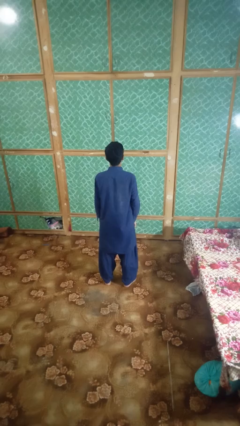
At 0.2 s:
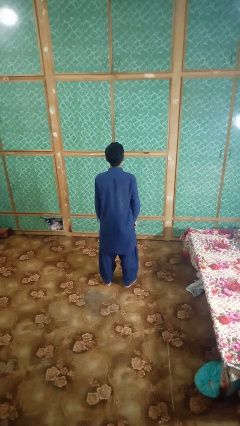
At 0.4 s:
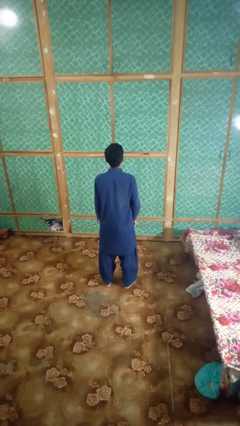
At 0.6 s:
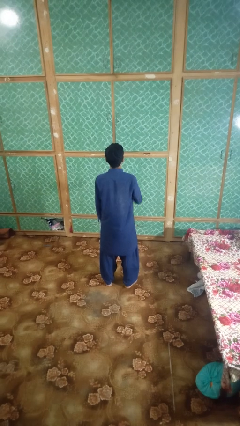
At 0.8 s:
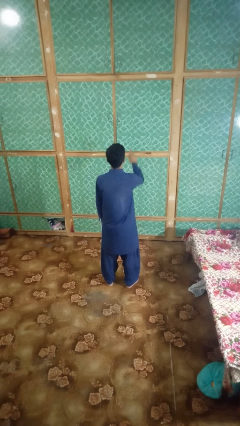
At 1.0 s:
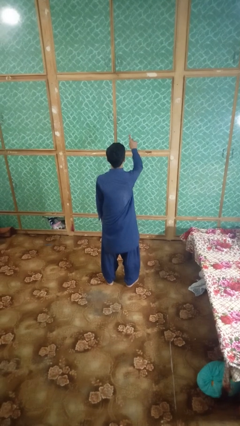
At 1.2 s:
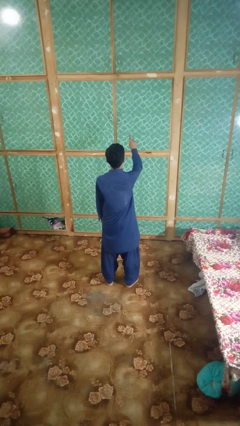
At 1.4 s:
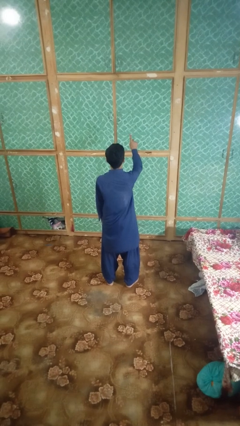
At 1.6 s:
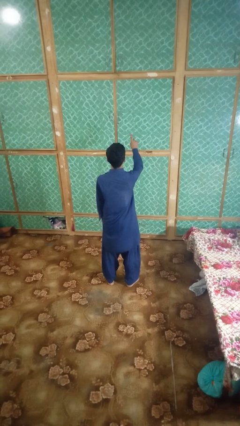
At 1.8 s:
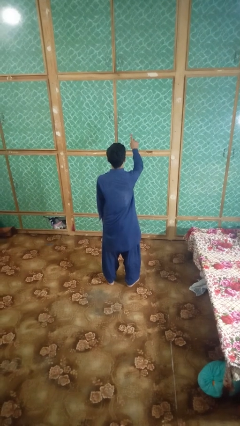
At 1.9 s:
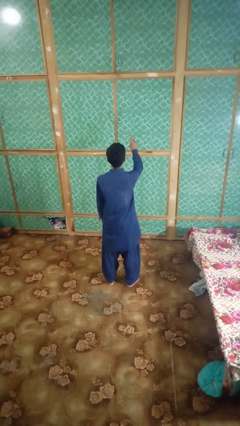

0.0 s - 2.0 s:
person gestures number one

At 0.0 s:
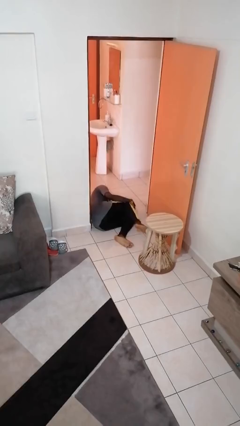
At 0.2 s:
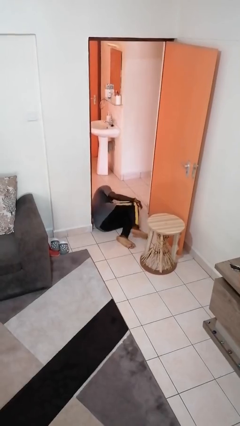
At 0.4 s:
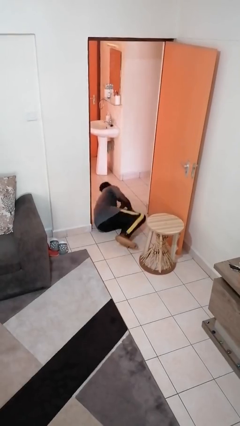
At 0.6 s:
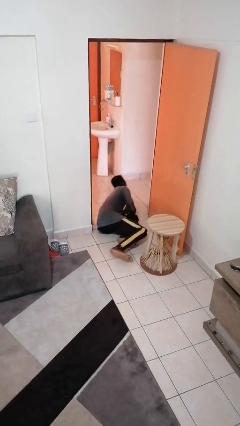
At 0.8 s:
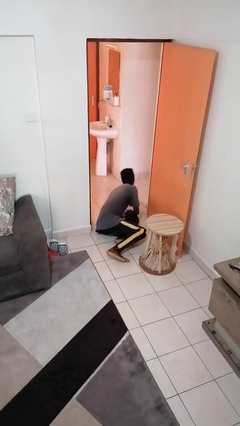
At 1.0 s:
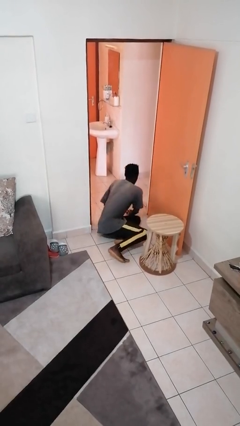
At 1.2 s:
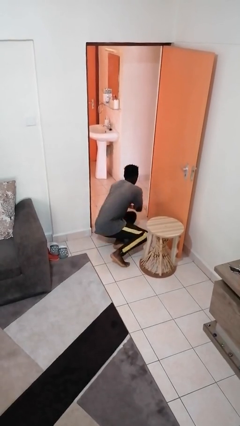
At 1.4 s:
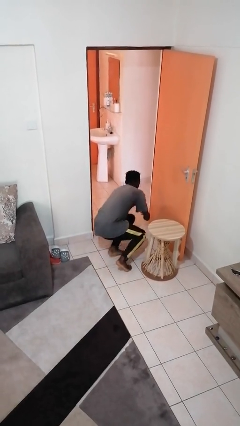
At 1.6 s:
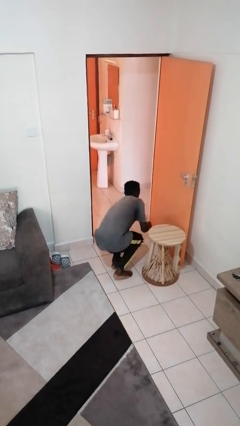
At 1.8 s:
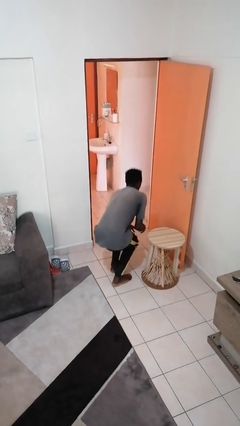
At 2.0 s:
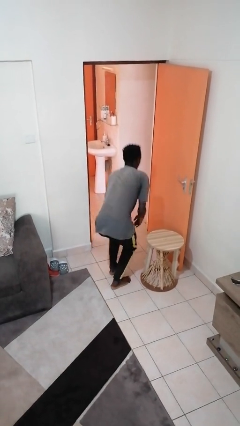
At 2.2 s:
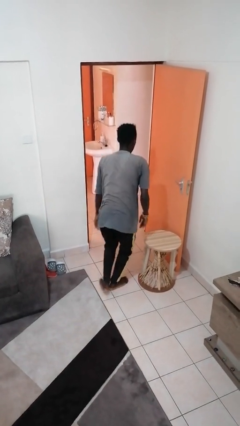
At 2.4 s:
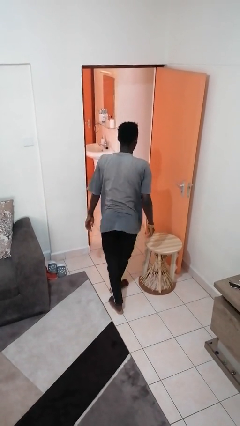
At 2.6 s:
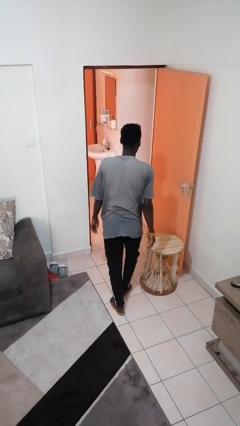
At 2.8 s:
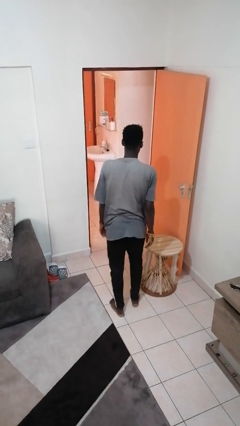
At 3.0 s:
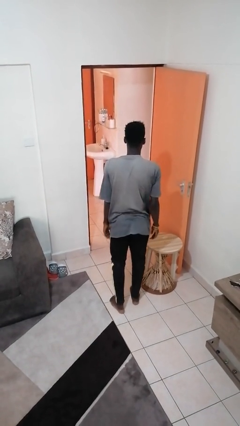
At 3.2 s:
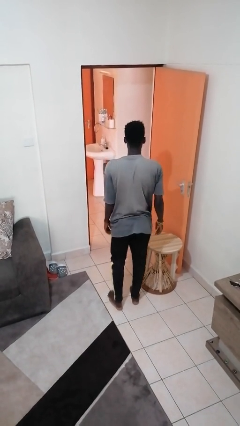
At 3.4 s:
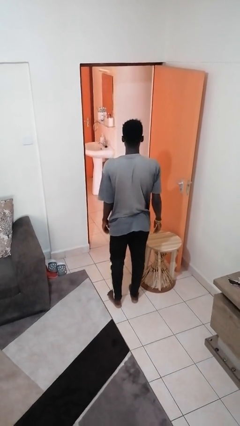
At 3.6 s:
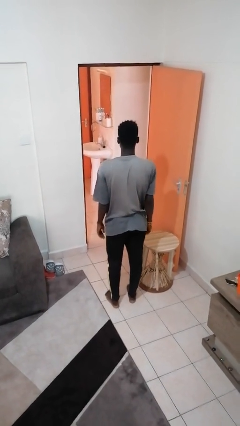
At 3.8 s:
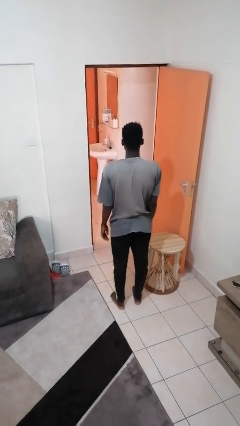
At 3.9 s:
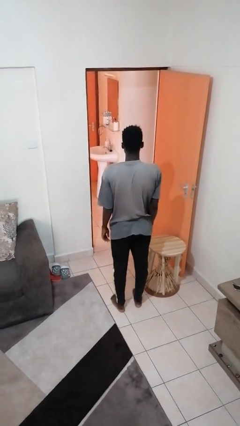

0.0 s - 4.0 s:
person stands up from floor

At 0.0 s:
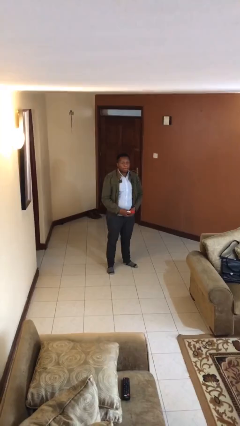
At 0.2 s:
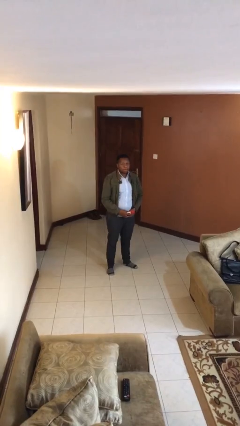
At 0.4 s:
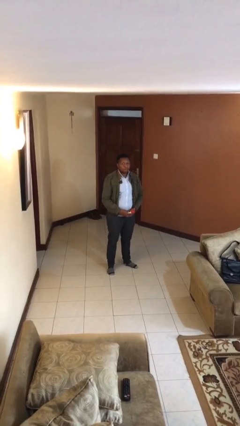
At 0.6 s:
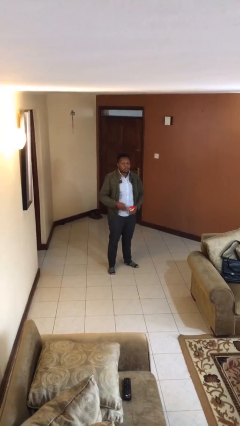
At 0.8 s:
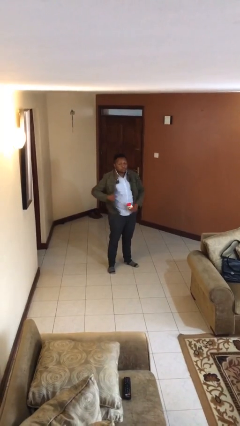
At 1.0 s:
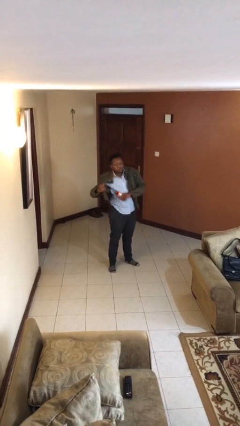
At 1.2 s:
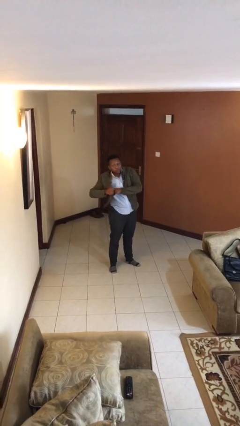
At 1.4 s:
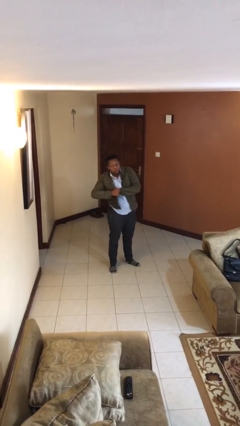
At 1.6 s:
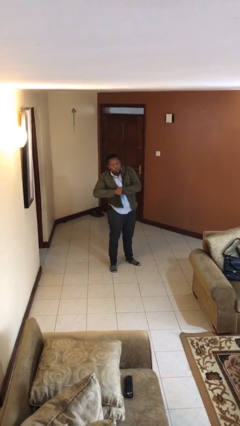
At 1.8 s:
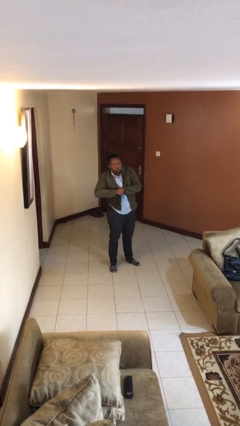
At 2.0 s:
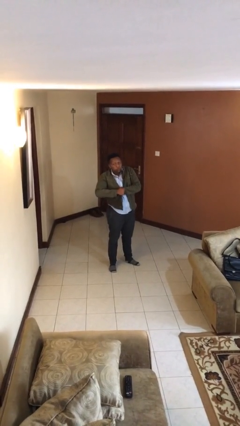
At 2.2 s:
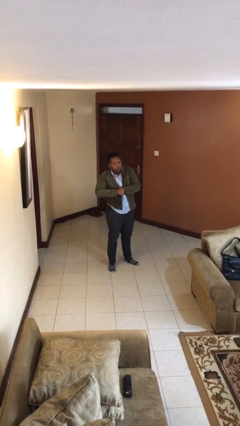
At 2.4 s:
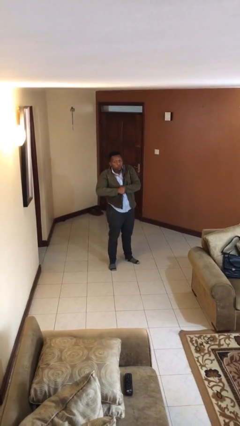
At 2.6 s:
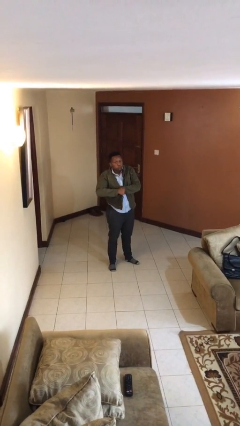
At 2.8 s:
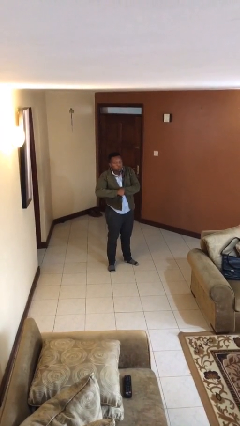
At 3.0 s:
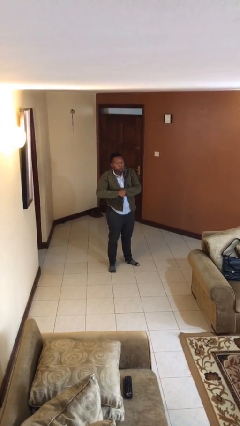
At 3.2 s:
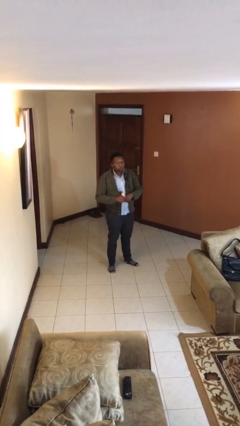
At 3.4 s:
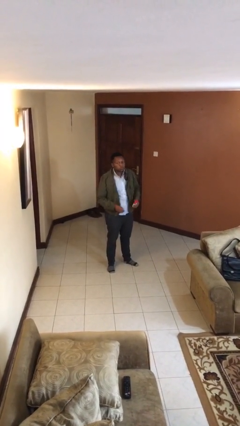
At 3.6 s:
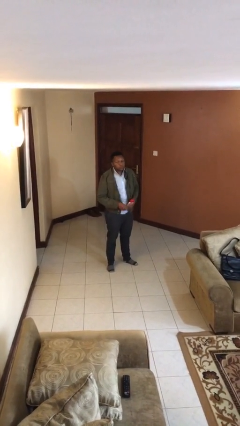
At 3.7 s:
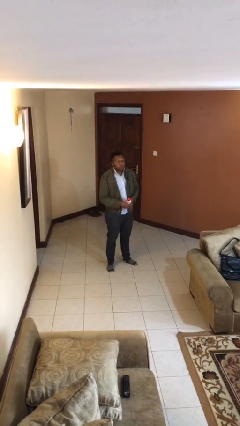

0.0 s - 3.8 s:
person applies deodorant

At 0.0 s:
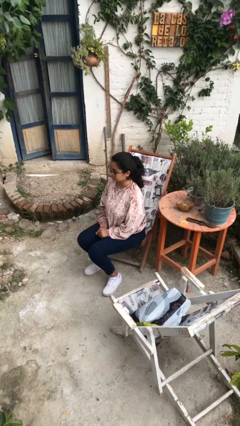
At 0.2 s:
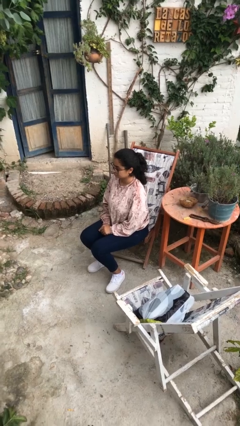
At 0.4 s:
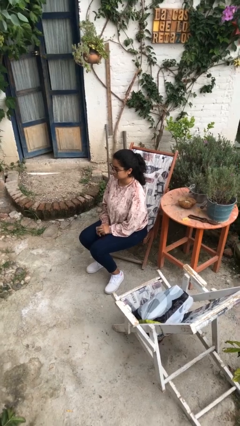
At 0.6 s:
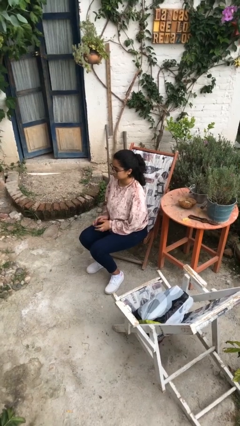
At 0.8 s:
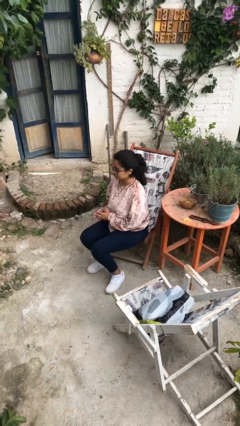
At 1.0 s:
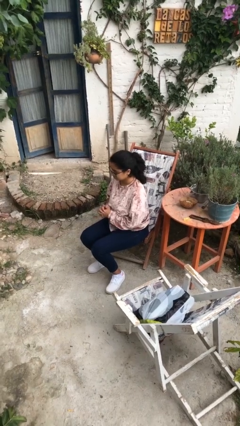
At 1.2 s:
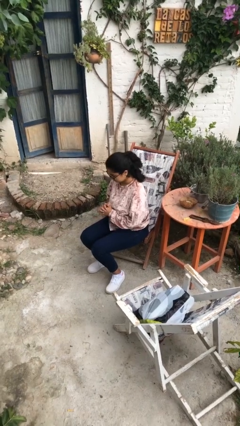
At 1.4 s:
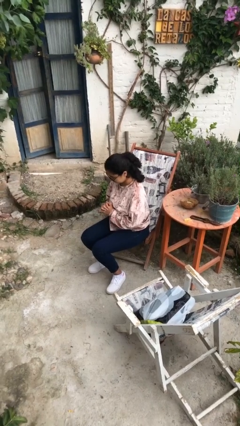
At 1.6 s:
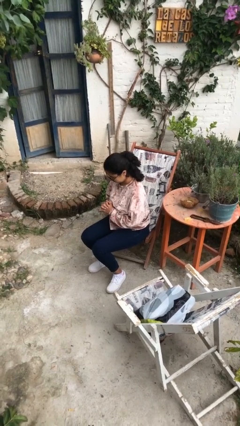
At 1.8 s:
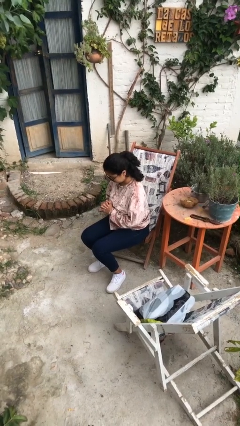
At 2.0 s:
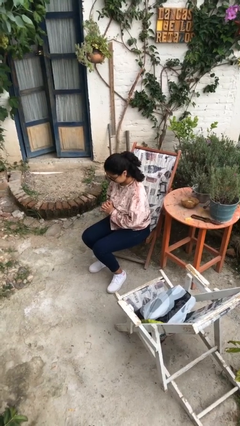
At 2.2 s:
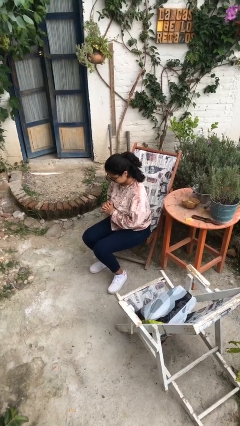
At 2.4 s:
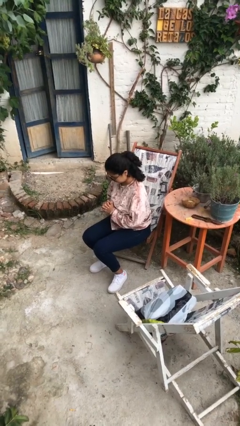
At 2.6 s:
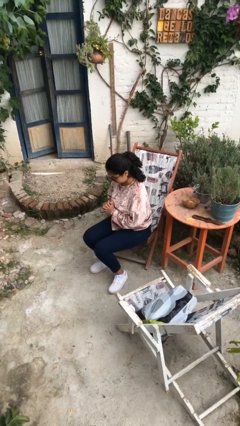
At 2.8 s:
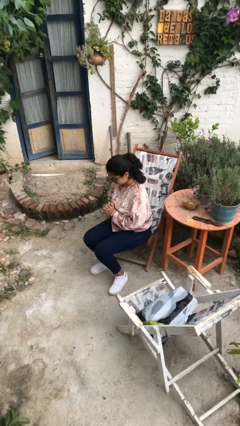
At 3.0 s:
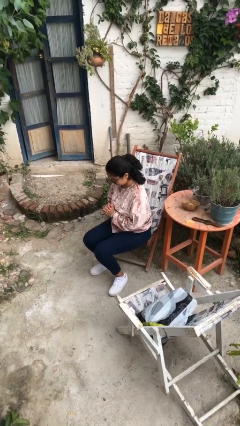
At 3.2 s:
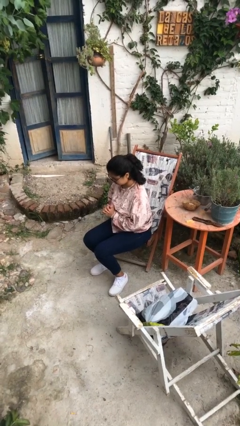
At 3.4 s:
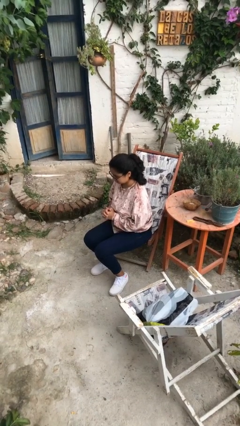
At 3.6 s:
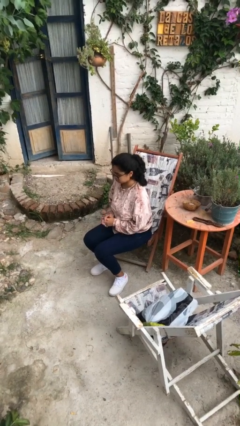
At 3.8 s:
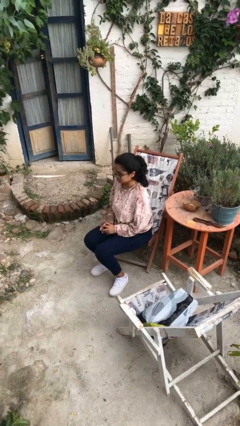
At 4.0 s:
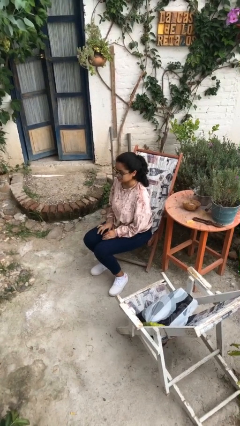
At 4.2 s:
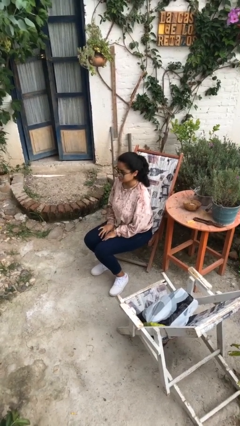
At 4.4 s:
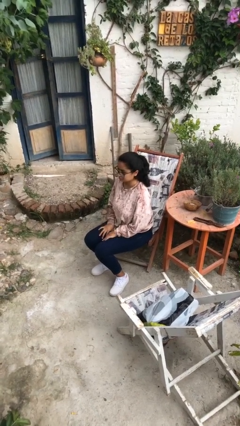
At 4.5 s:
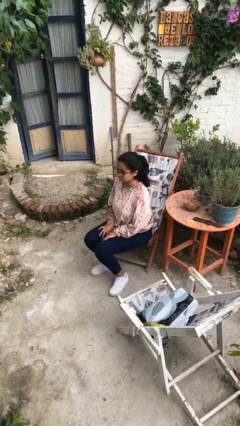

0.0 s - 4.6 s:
person prays

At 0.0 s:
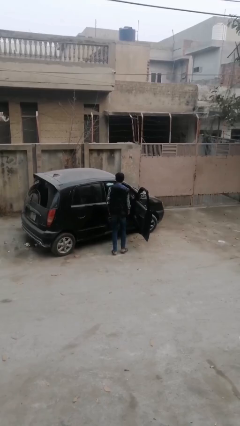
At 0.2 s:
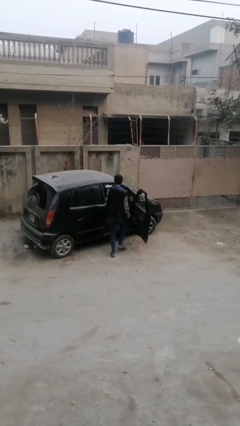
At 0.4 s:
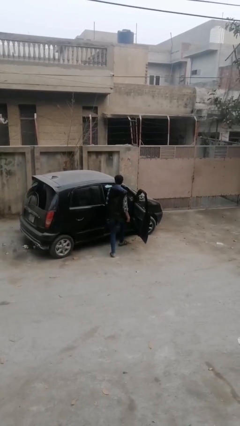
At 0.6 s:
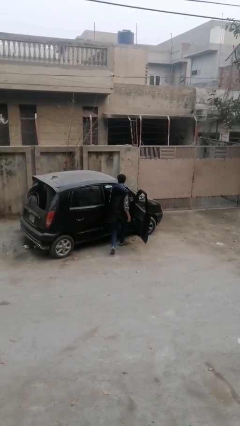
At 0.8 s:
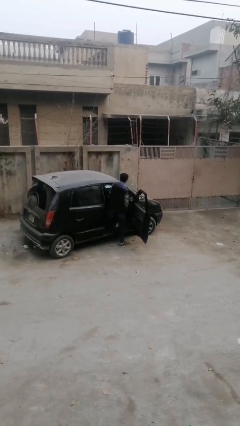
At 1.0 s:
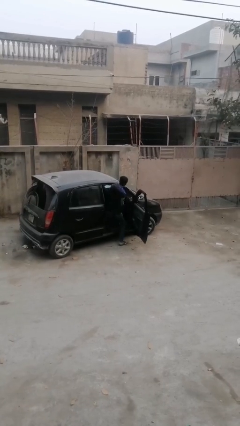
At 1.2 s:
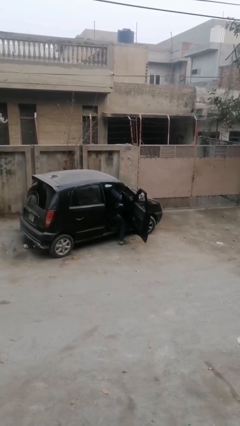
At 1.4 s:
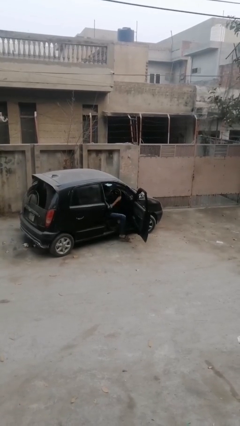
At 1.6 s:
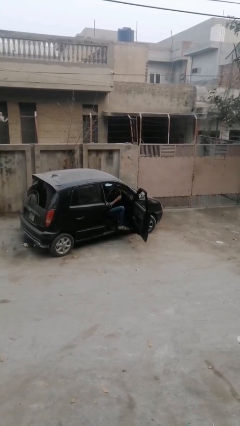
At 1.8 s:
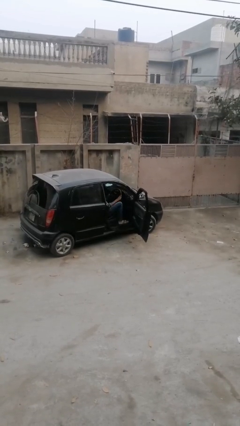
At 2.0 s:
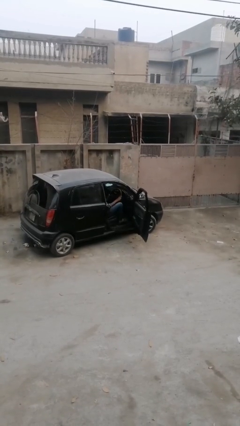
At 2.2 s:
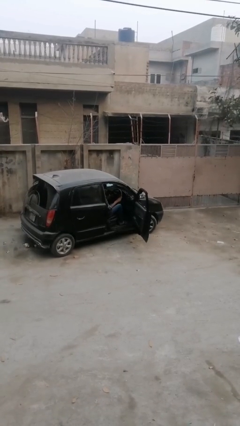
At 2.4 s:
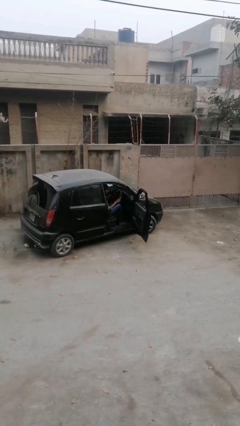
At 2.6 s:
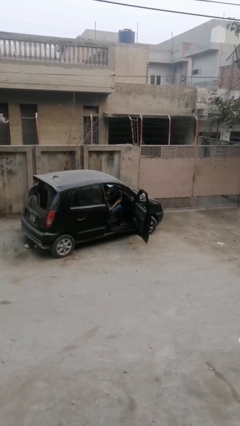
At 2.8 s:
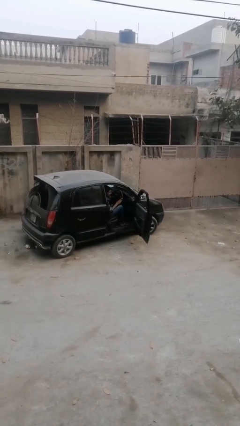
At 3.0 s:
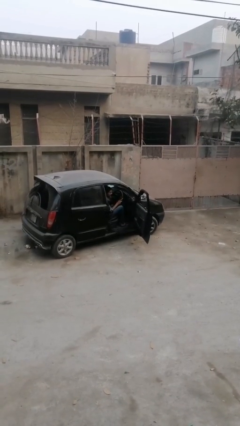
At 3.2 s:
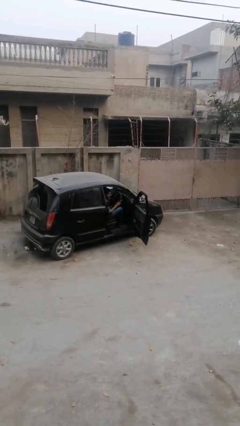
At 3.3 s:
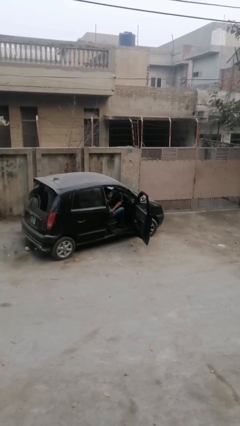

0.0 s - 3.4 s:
person enters car
